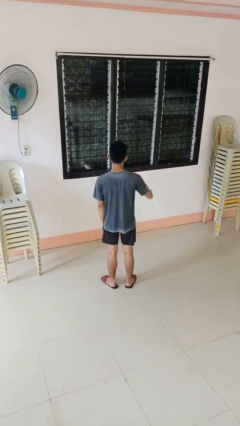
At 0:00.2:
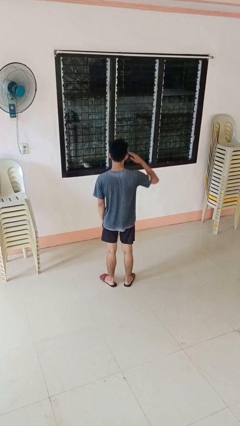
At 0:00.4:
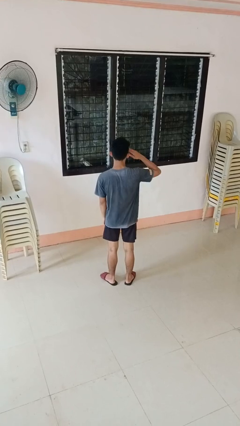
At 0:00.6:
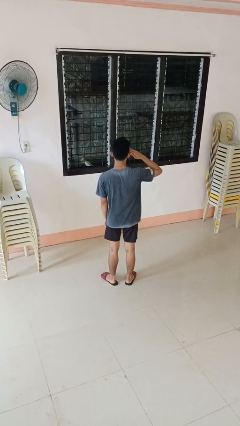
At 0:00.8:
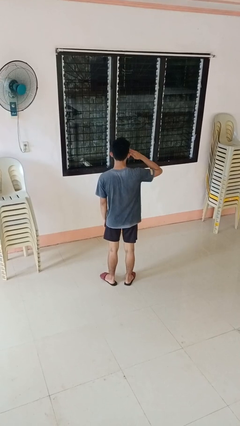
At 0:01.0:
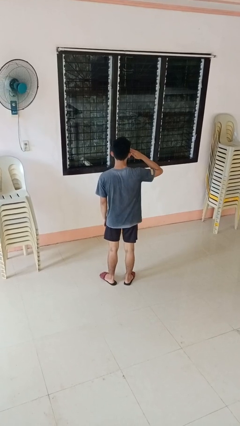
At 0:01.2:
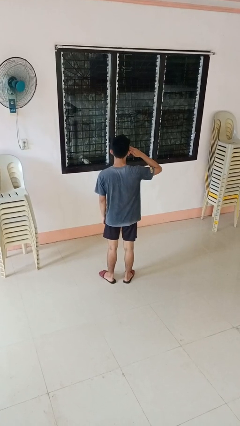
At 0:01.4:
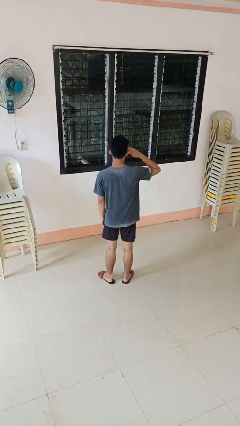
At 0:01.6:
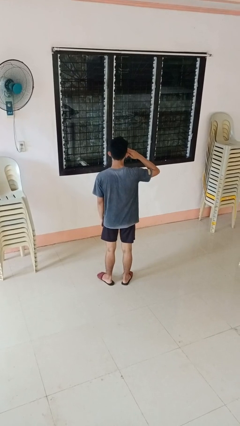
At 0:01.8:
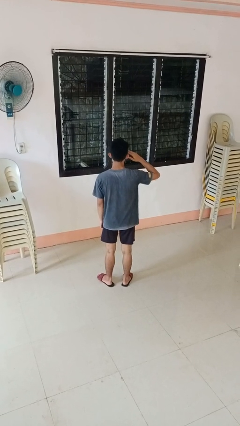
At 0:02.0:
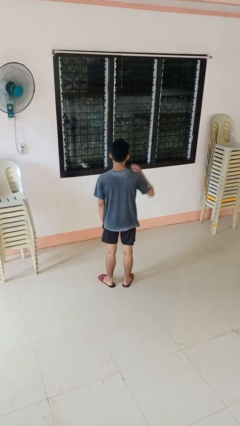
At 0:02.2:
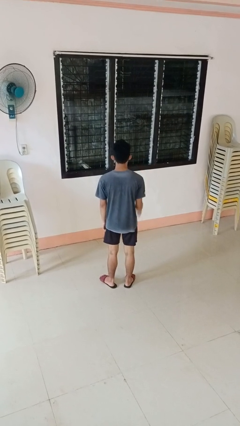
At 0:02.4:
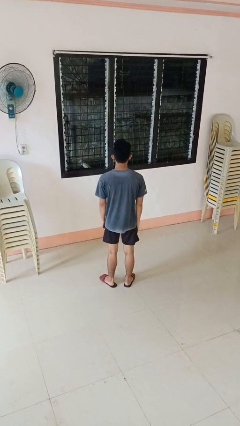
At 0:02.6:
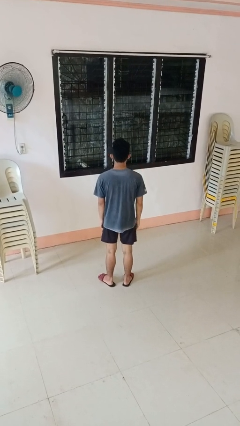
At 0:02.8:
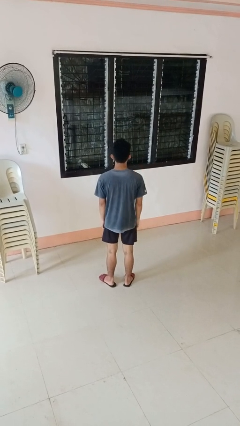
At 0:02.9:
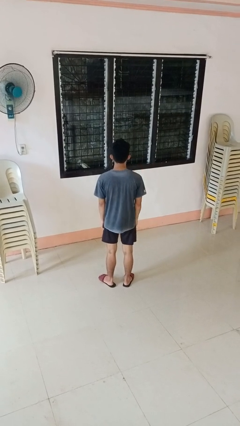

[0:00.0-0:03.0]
person salutes

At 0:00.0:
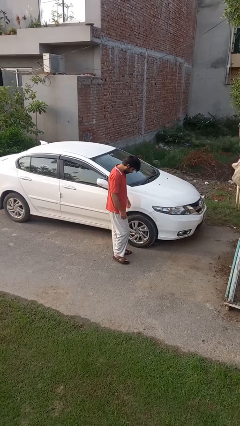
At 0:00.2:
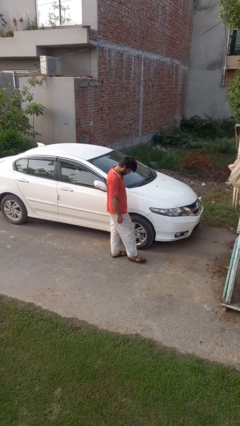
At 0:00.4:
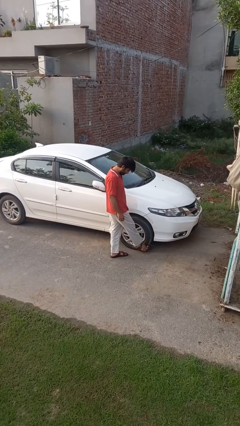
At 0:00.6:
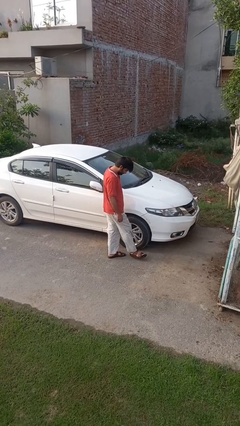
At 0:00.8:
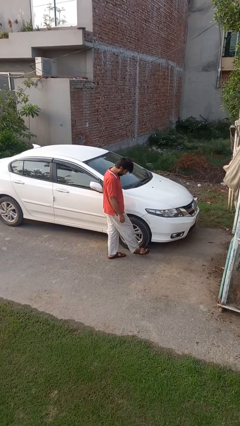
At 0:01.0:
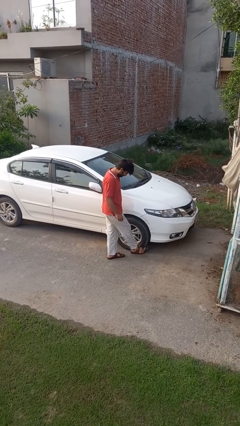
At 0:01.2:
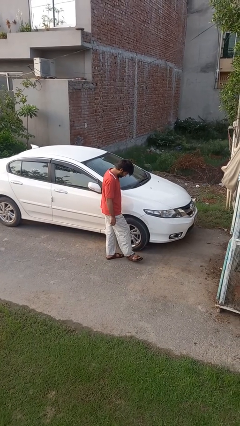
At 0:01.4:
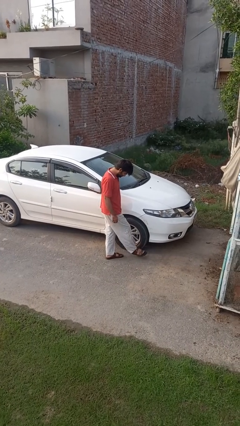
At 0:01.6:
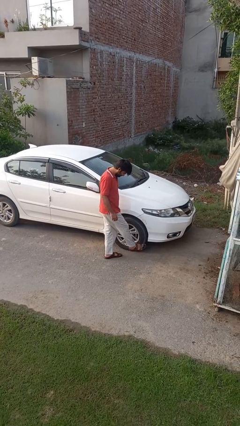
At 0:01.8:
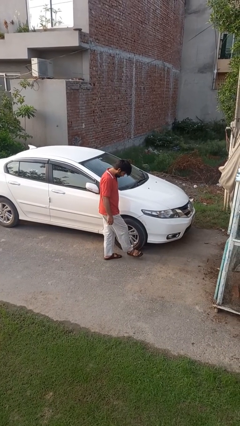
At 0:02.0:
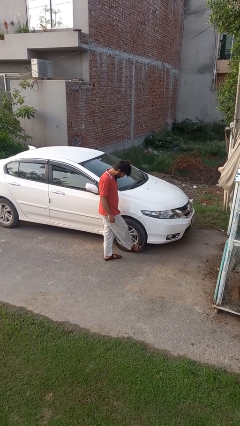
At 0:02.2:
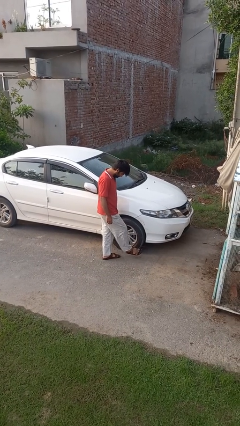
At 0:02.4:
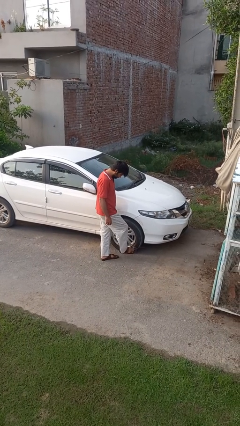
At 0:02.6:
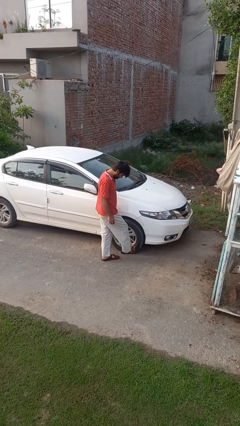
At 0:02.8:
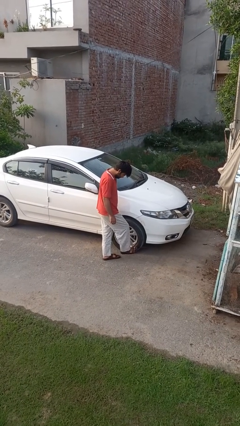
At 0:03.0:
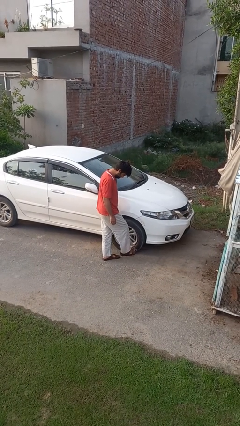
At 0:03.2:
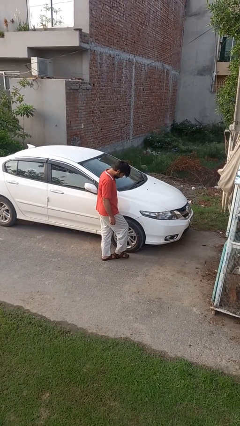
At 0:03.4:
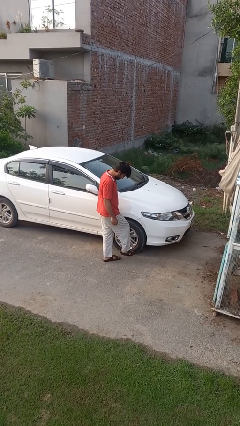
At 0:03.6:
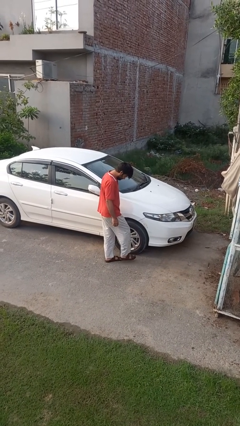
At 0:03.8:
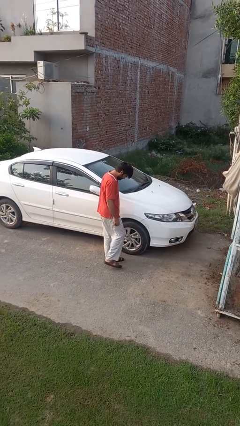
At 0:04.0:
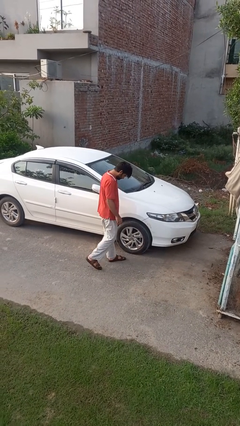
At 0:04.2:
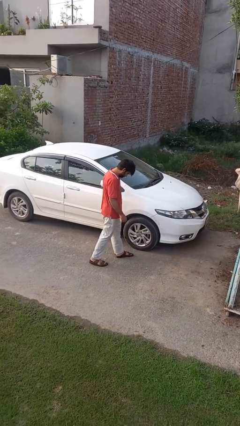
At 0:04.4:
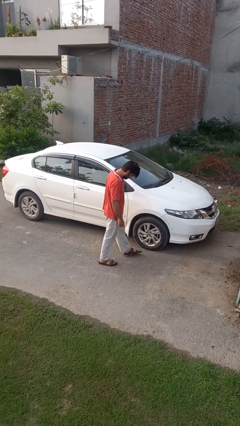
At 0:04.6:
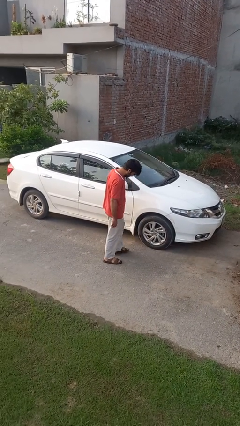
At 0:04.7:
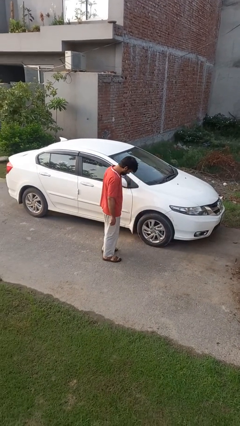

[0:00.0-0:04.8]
person kicks car tires

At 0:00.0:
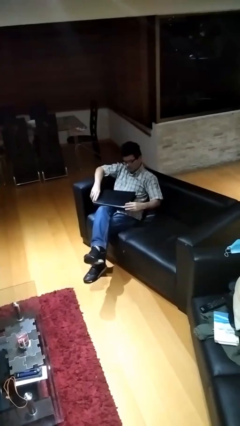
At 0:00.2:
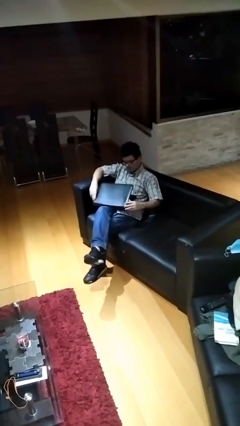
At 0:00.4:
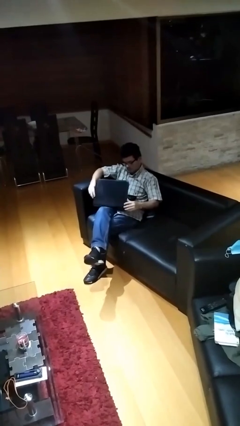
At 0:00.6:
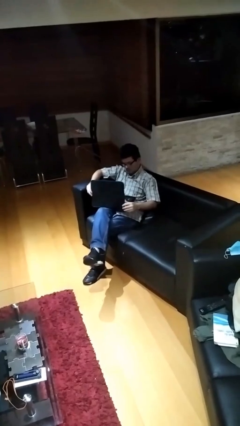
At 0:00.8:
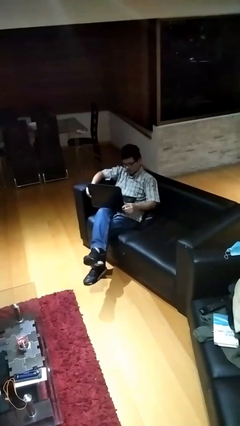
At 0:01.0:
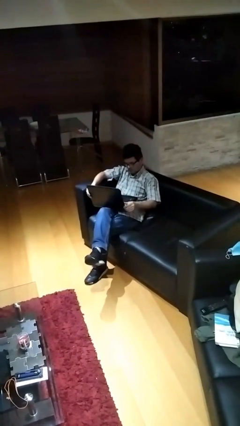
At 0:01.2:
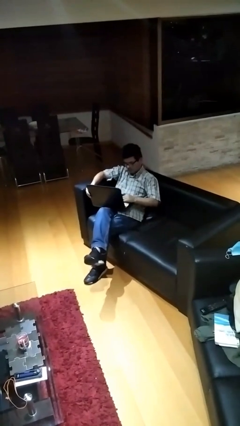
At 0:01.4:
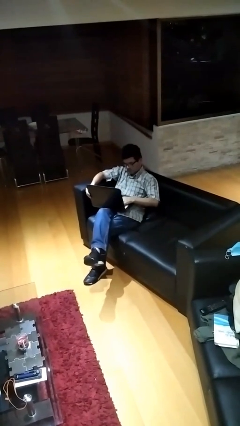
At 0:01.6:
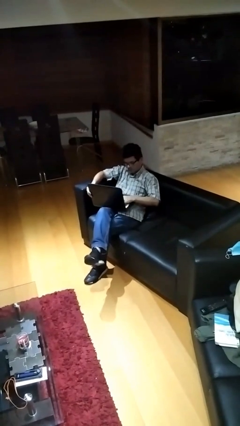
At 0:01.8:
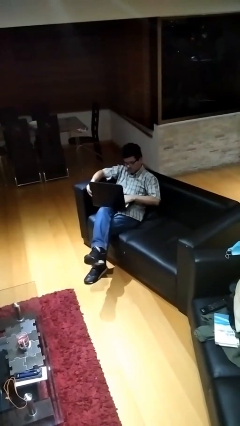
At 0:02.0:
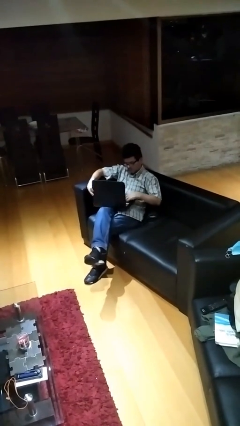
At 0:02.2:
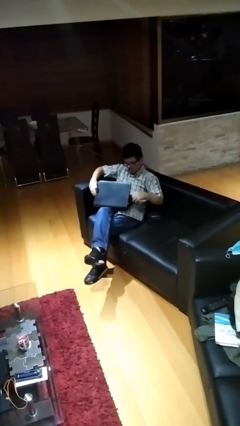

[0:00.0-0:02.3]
person interacts with laptop

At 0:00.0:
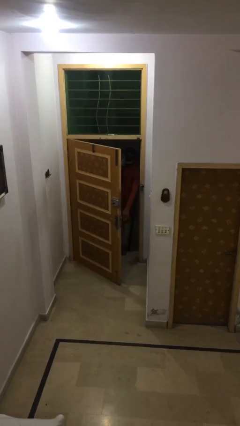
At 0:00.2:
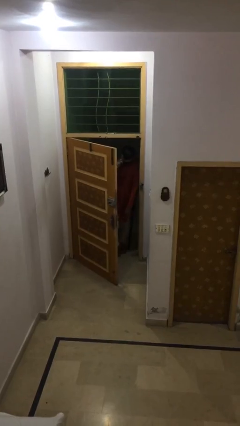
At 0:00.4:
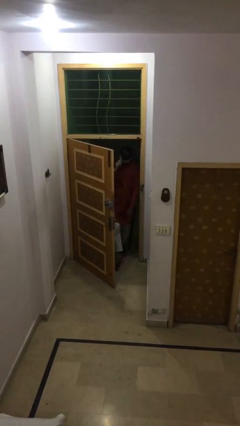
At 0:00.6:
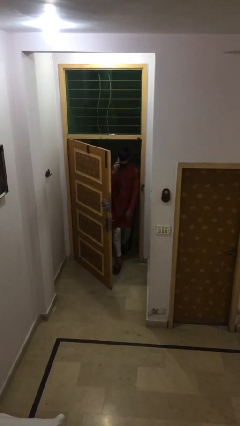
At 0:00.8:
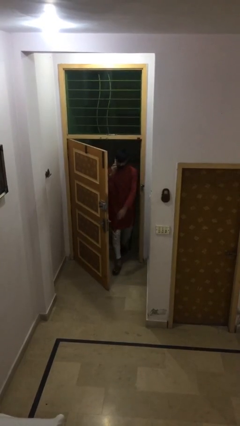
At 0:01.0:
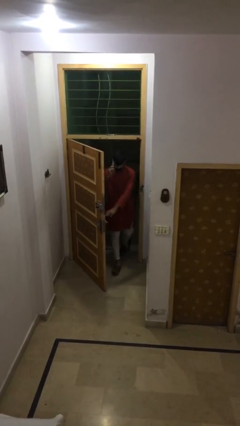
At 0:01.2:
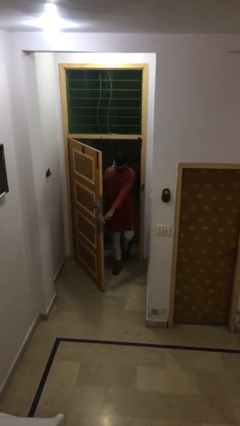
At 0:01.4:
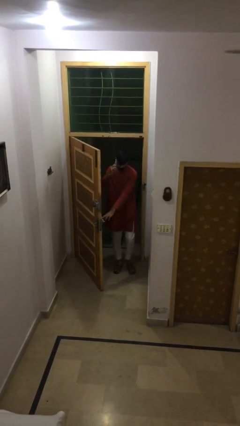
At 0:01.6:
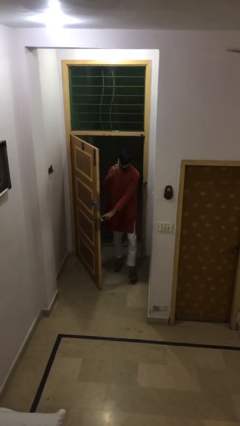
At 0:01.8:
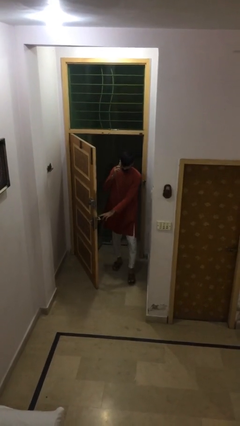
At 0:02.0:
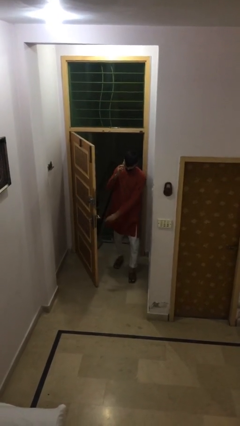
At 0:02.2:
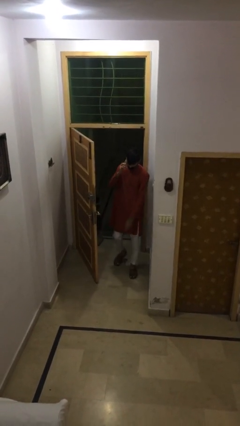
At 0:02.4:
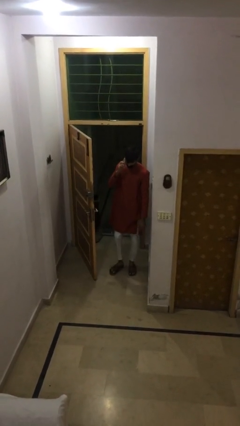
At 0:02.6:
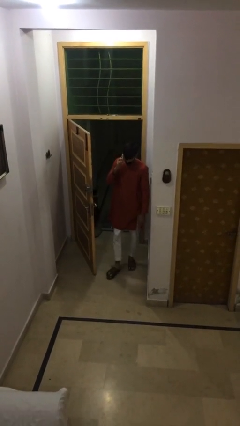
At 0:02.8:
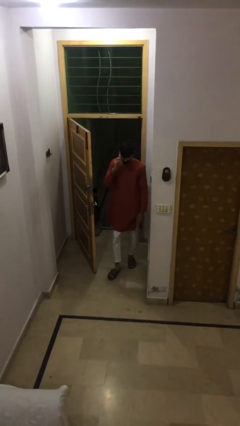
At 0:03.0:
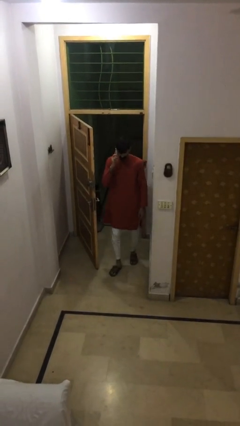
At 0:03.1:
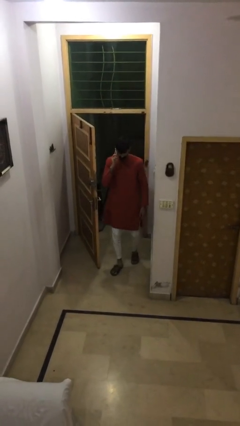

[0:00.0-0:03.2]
person enters scene through structure

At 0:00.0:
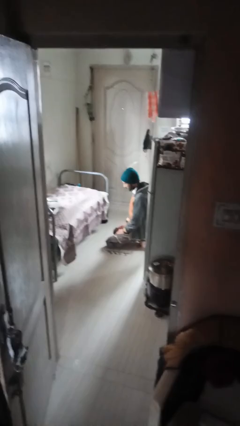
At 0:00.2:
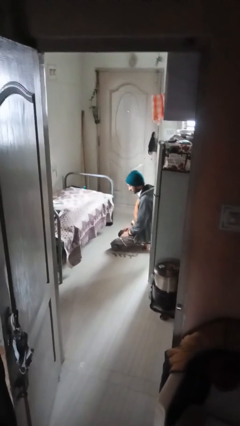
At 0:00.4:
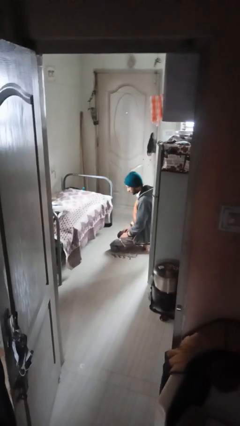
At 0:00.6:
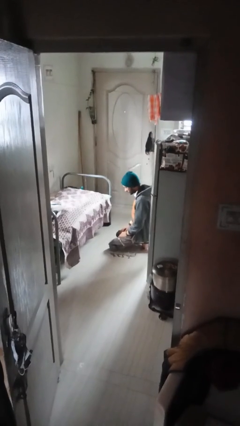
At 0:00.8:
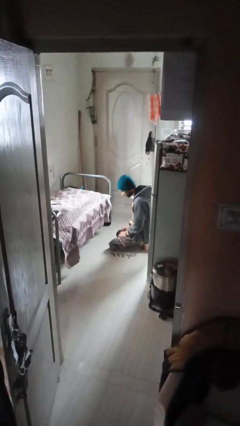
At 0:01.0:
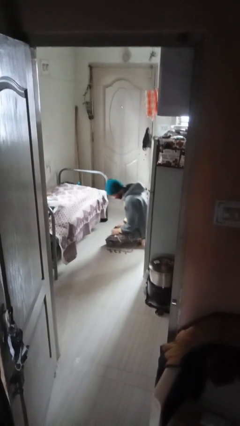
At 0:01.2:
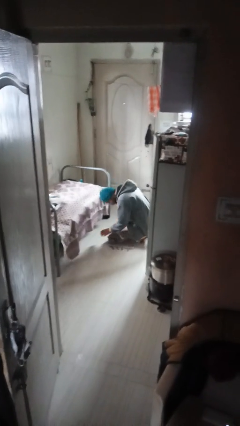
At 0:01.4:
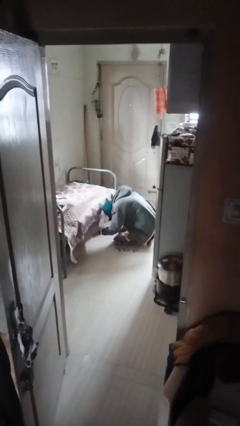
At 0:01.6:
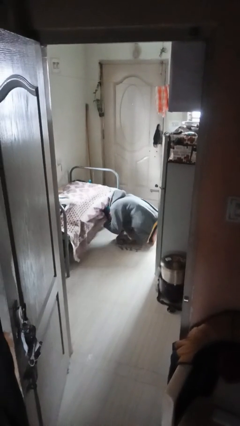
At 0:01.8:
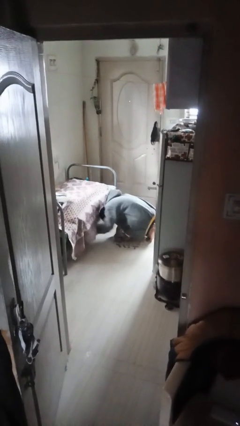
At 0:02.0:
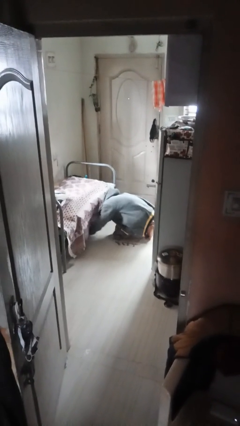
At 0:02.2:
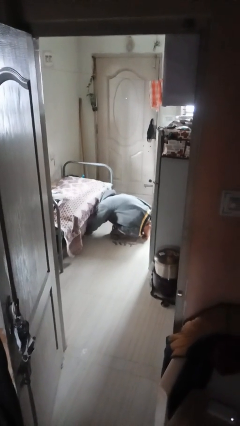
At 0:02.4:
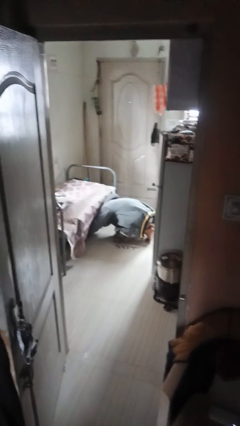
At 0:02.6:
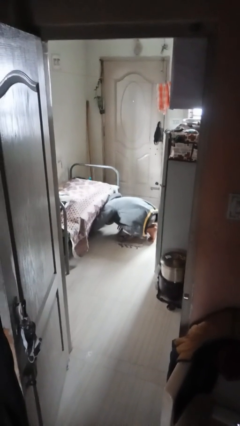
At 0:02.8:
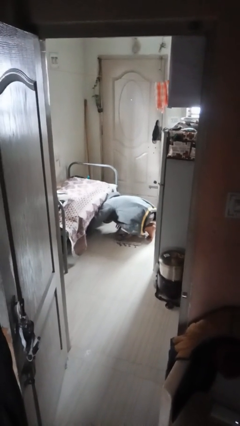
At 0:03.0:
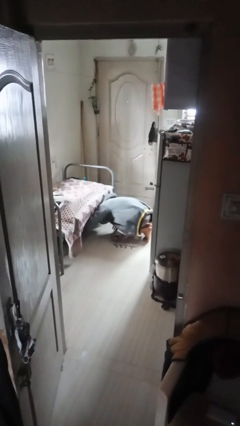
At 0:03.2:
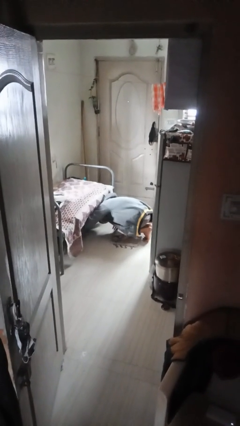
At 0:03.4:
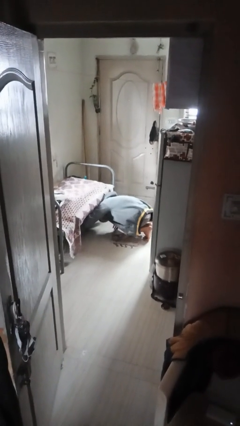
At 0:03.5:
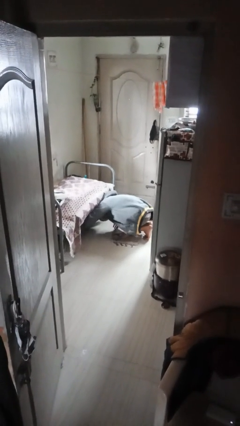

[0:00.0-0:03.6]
person searches under bed

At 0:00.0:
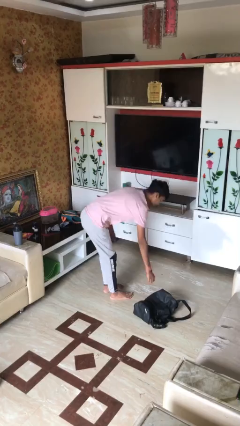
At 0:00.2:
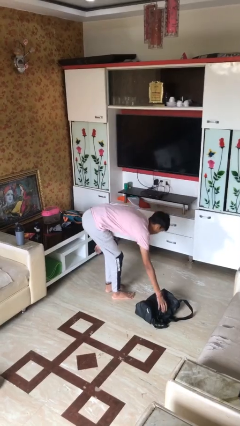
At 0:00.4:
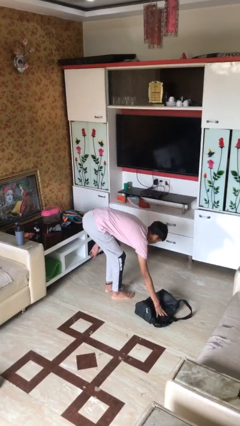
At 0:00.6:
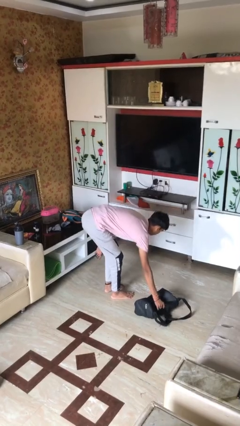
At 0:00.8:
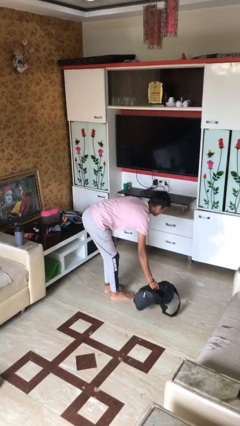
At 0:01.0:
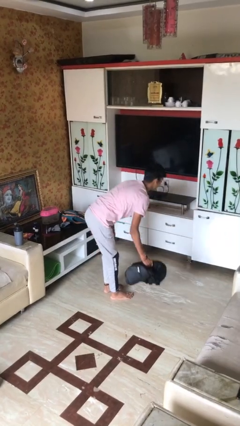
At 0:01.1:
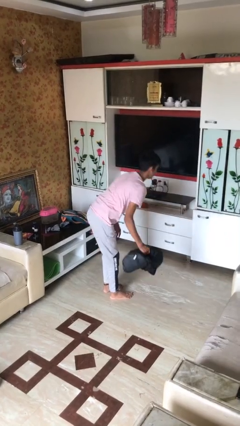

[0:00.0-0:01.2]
person picks up object from floor
